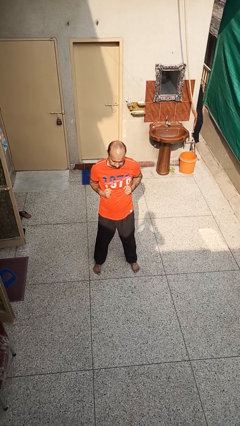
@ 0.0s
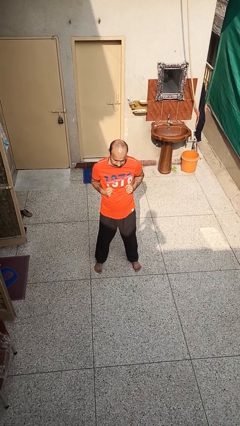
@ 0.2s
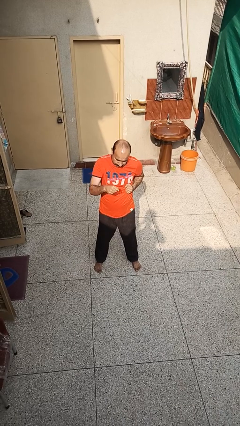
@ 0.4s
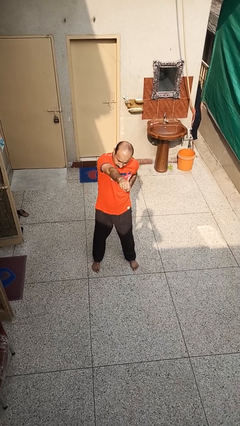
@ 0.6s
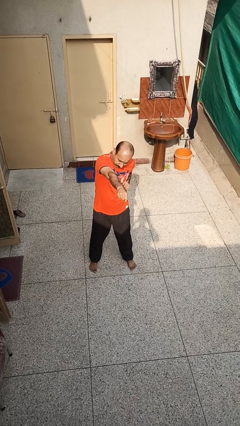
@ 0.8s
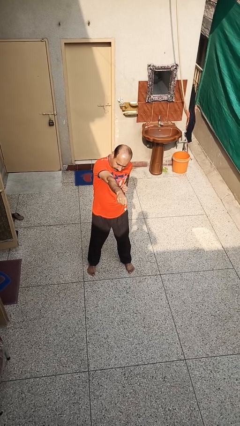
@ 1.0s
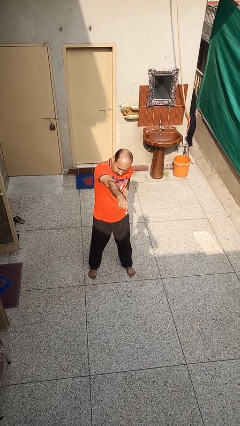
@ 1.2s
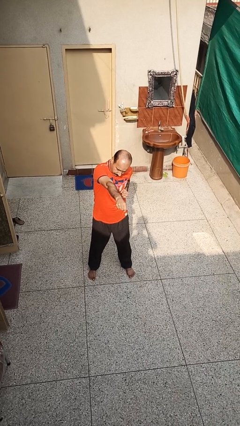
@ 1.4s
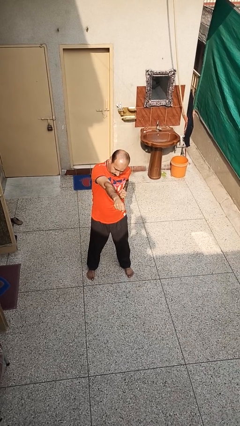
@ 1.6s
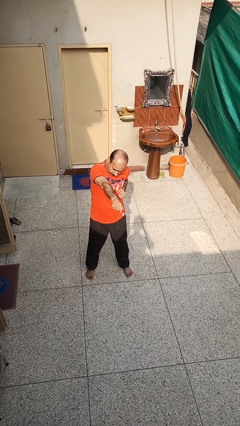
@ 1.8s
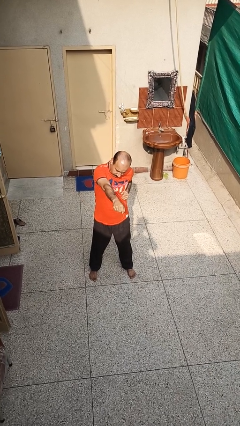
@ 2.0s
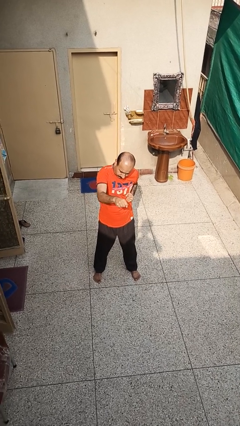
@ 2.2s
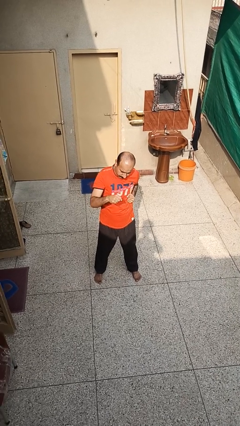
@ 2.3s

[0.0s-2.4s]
person punches

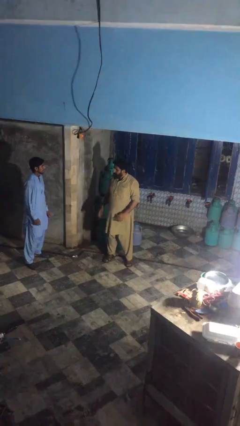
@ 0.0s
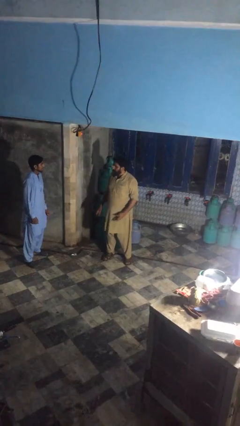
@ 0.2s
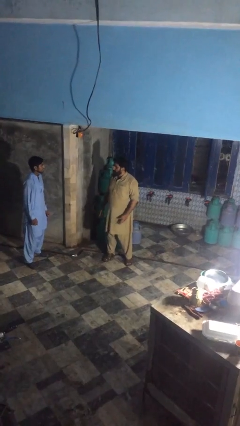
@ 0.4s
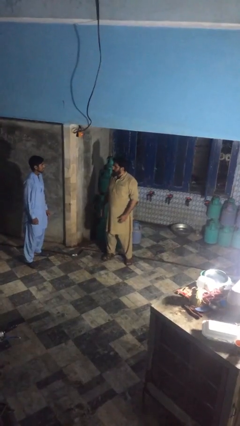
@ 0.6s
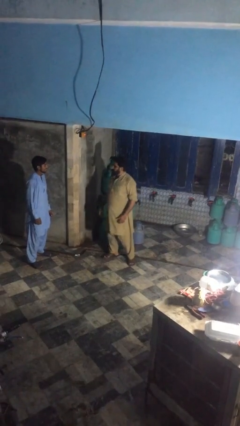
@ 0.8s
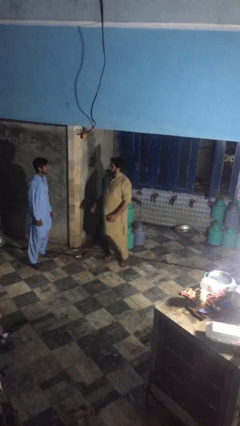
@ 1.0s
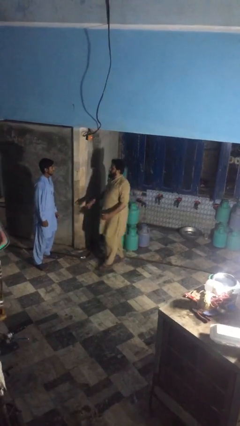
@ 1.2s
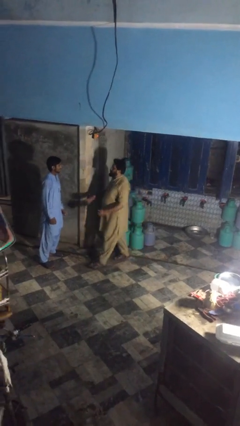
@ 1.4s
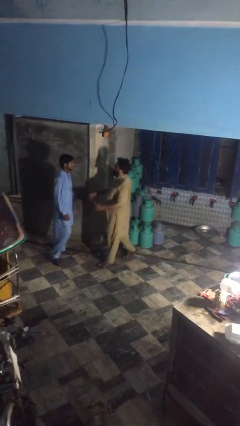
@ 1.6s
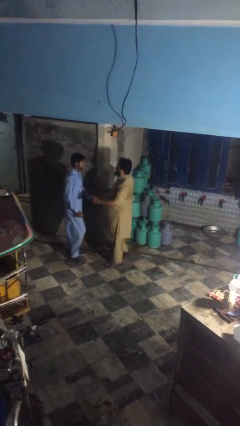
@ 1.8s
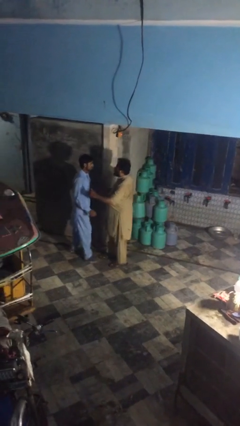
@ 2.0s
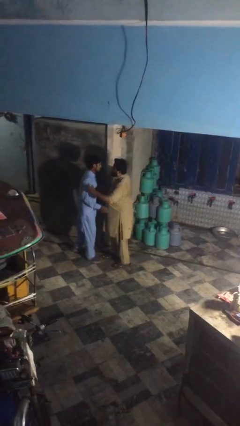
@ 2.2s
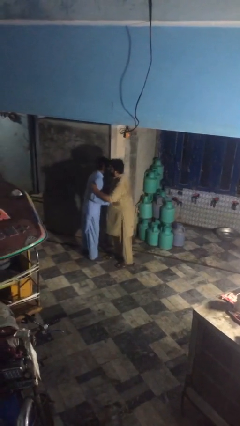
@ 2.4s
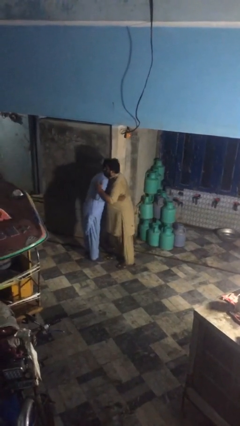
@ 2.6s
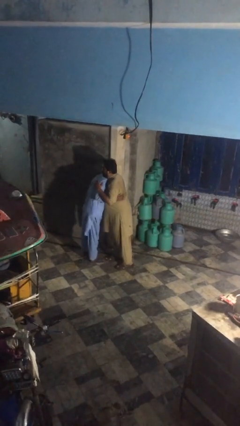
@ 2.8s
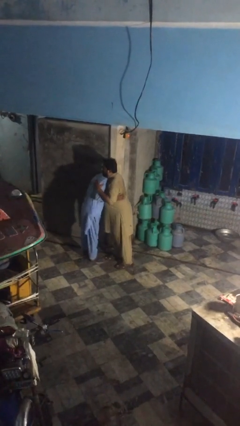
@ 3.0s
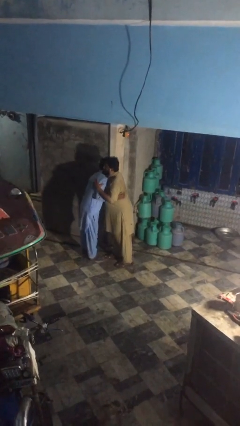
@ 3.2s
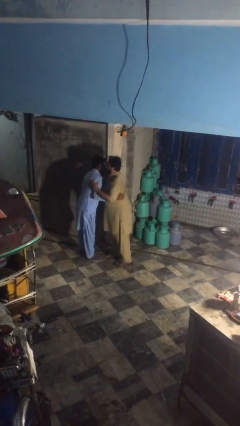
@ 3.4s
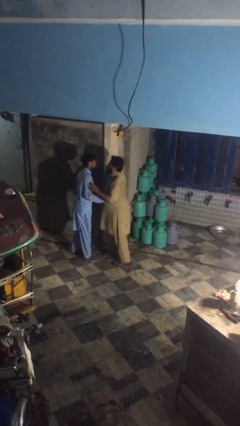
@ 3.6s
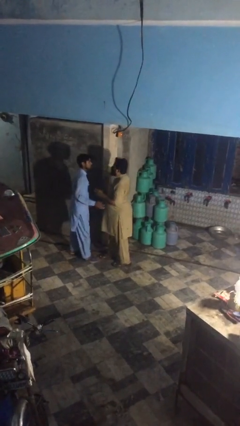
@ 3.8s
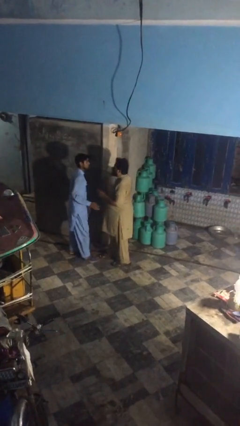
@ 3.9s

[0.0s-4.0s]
person embraces person

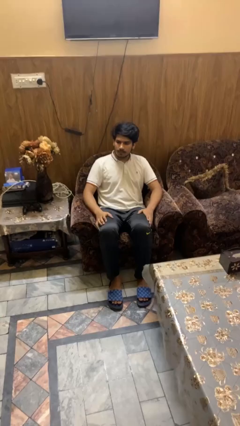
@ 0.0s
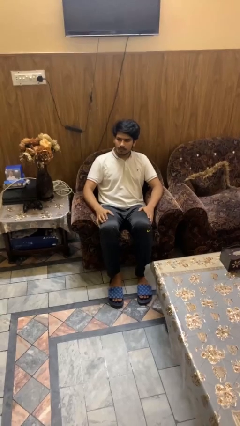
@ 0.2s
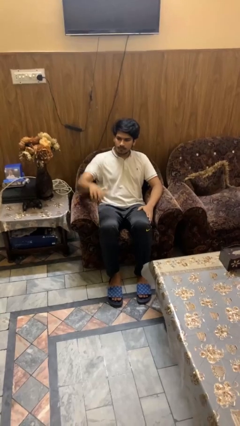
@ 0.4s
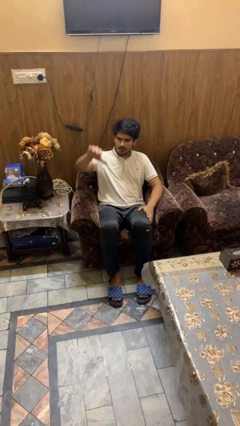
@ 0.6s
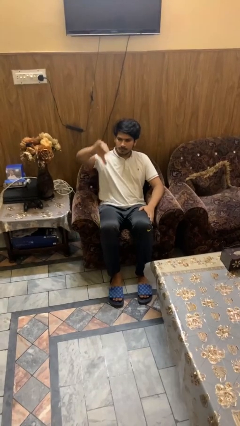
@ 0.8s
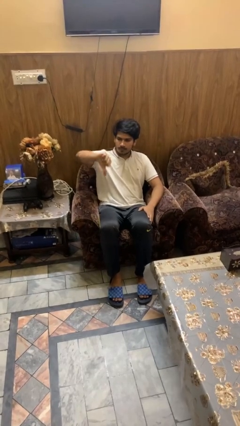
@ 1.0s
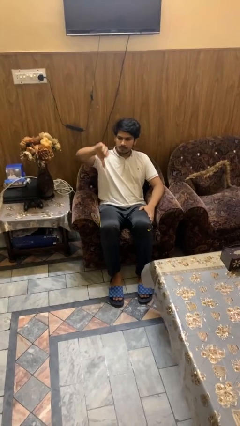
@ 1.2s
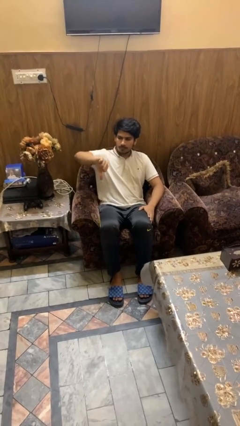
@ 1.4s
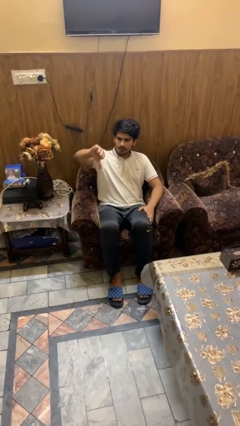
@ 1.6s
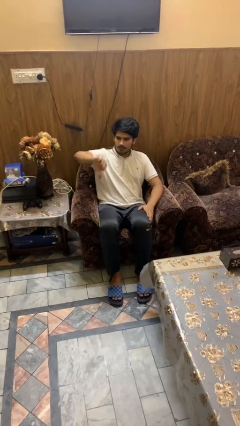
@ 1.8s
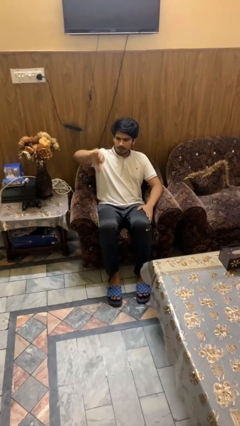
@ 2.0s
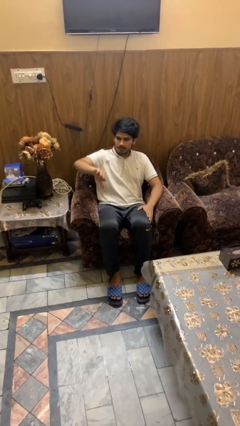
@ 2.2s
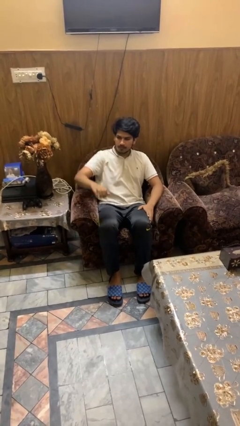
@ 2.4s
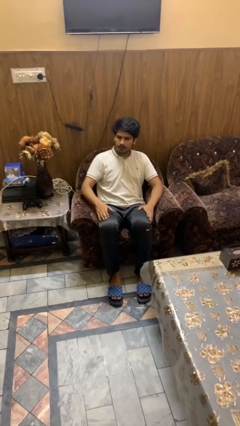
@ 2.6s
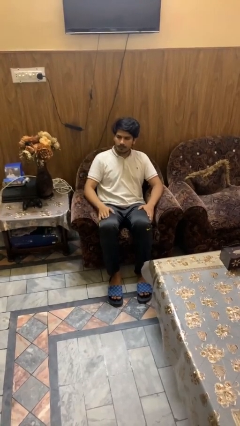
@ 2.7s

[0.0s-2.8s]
person gestures thumbs down

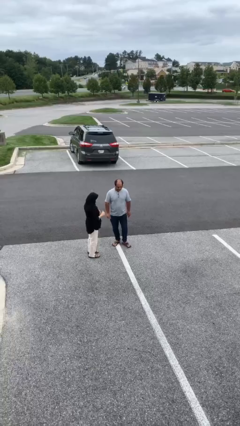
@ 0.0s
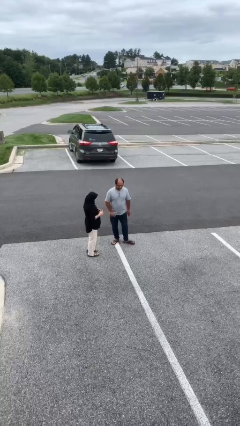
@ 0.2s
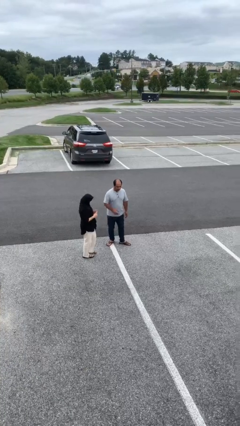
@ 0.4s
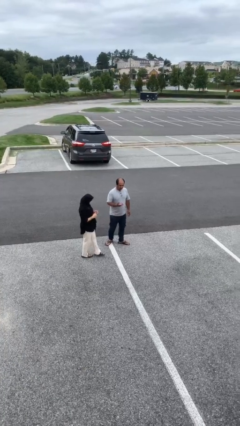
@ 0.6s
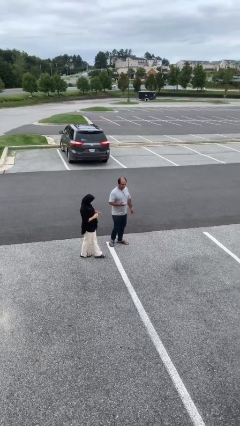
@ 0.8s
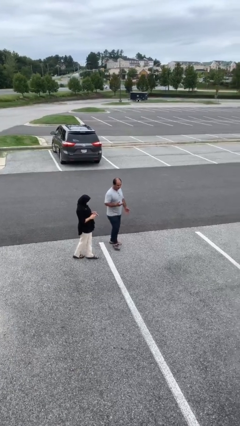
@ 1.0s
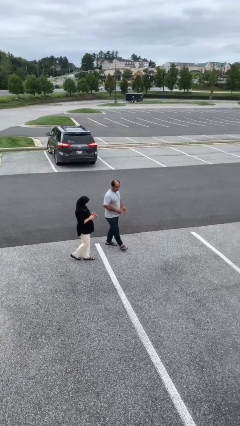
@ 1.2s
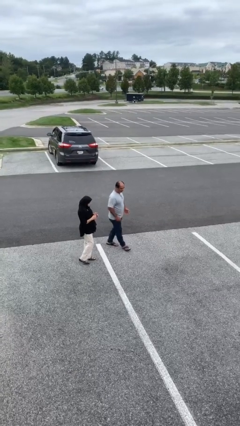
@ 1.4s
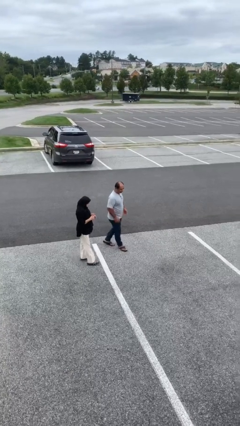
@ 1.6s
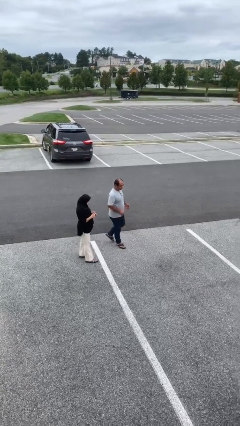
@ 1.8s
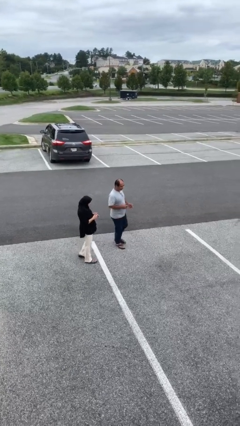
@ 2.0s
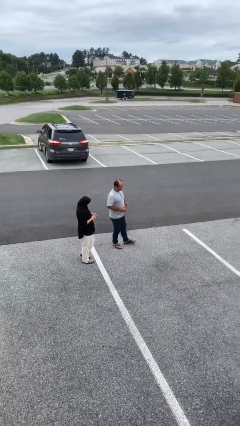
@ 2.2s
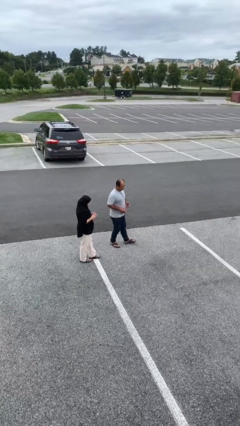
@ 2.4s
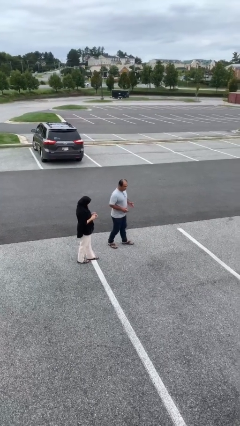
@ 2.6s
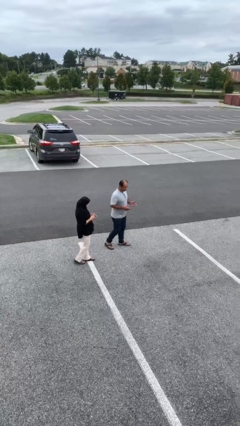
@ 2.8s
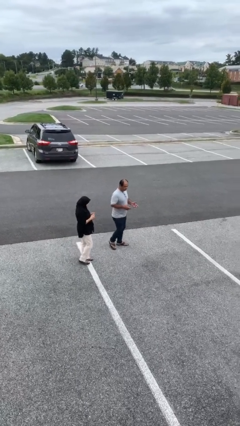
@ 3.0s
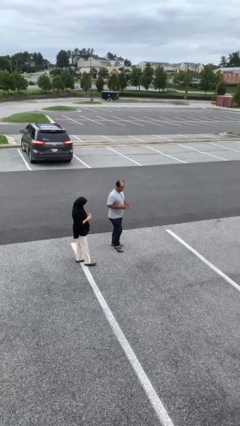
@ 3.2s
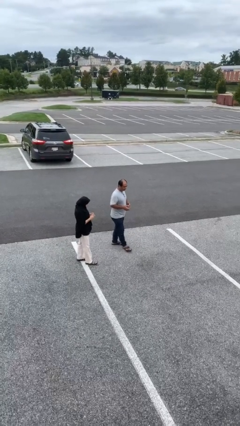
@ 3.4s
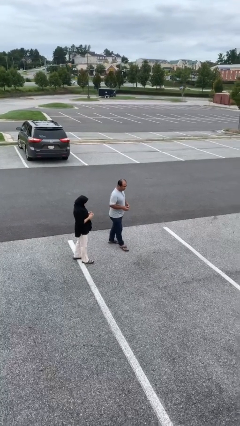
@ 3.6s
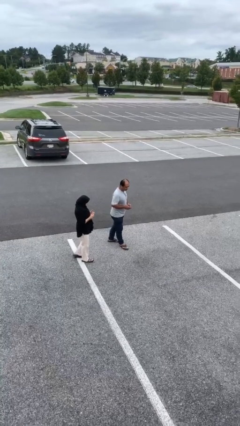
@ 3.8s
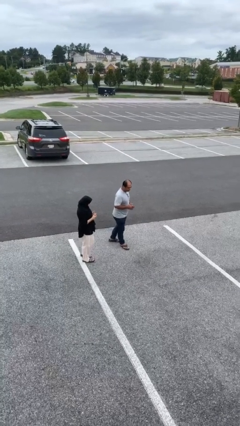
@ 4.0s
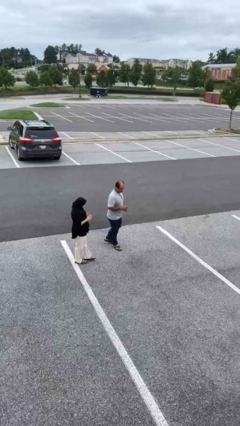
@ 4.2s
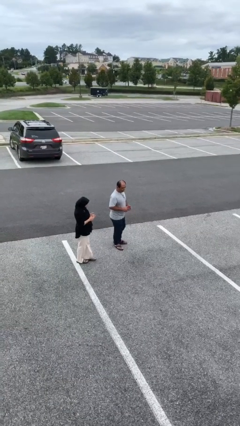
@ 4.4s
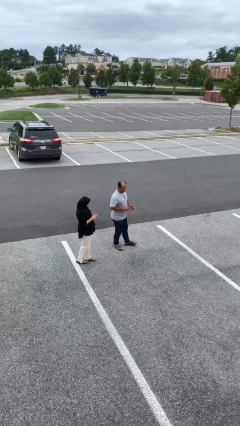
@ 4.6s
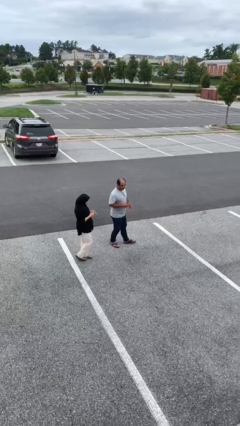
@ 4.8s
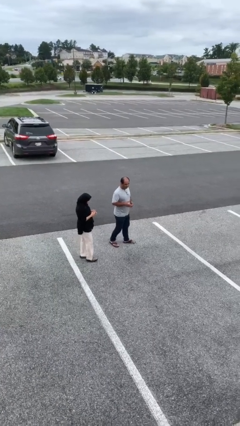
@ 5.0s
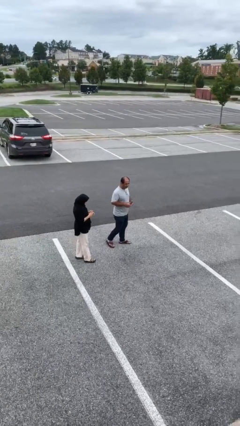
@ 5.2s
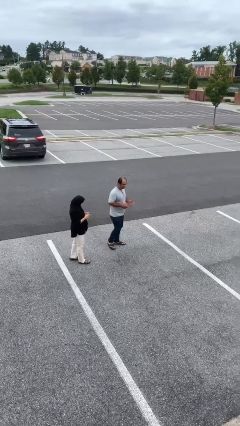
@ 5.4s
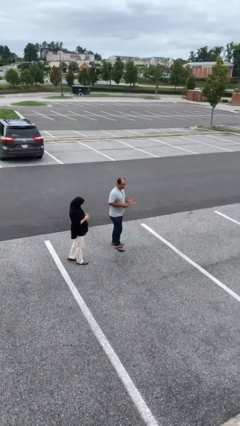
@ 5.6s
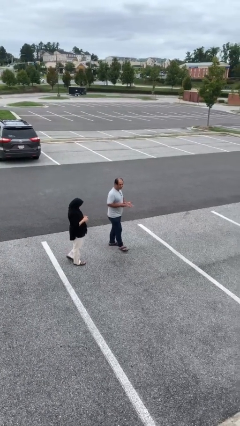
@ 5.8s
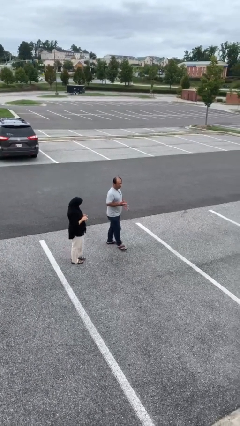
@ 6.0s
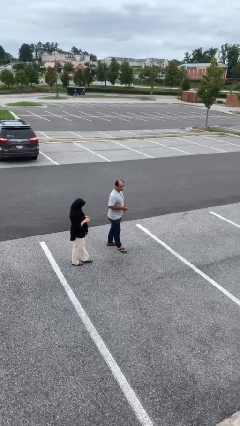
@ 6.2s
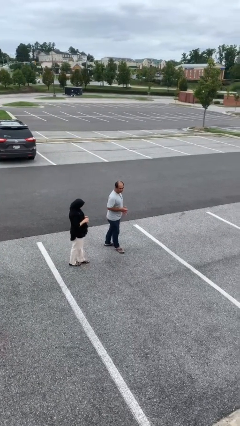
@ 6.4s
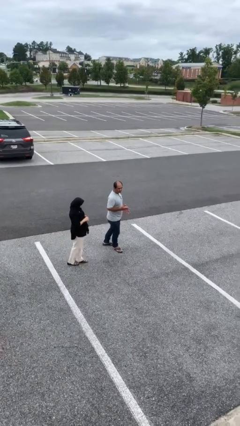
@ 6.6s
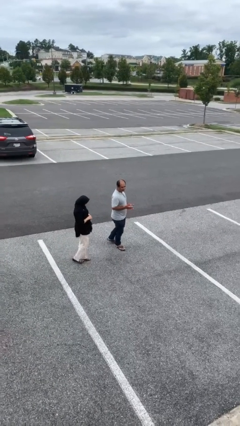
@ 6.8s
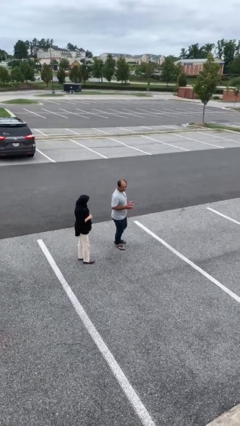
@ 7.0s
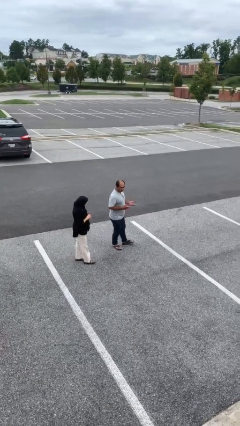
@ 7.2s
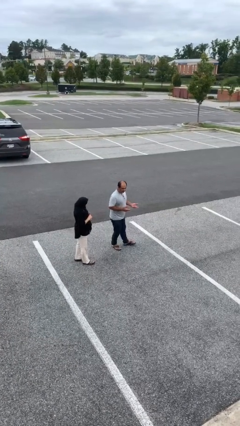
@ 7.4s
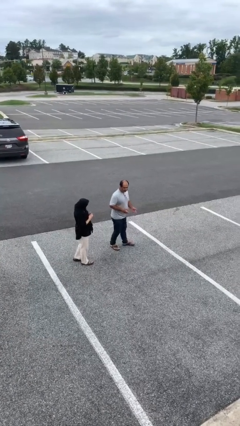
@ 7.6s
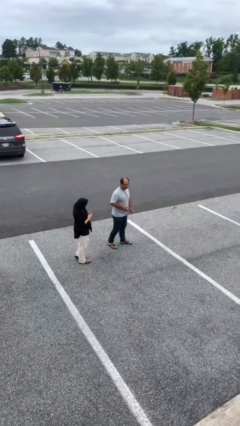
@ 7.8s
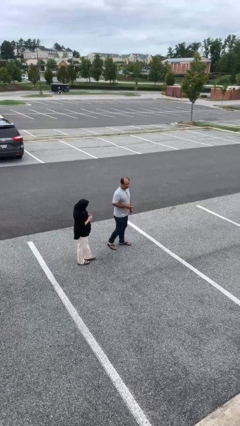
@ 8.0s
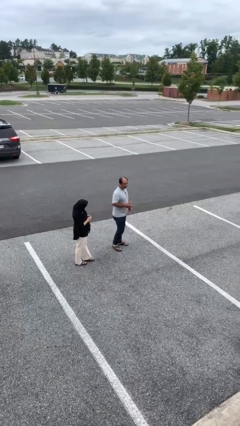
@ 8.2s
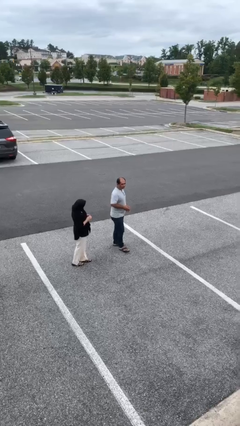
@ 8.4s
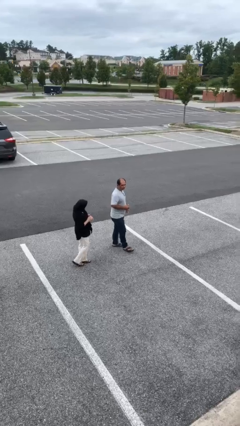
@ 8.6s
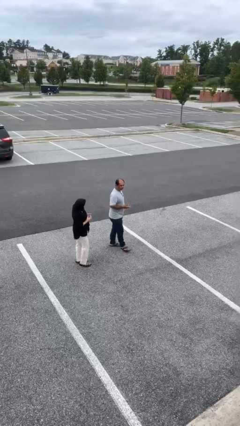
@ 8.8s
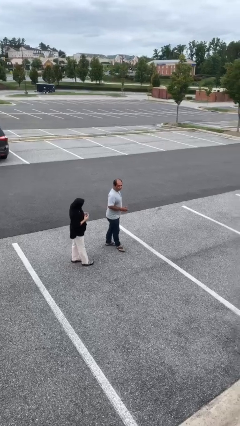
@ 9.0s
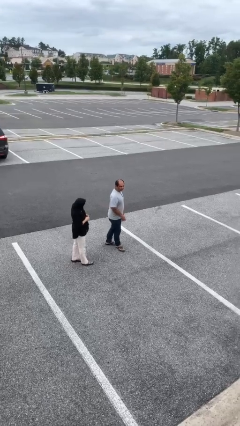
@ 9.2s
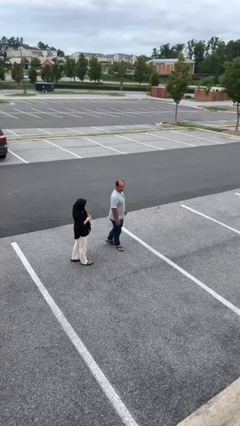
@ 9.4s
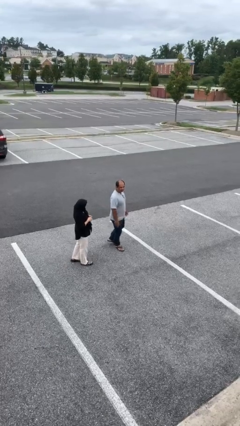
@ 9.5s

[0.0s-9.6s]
person talks to person
